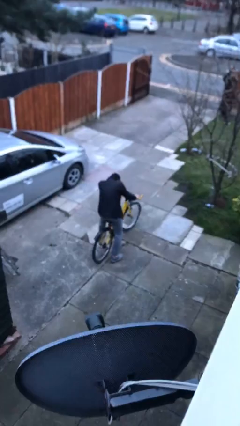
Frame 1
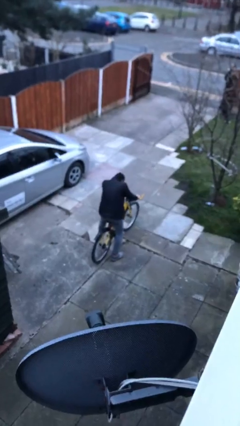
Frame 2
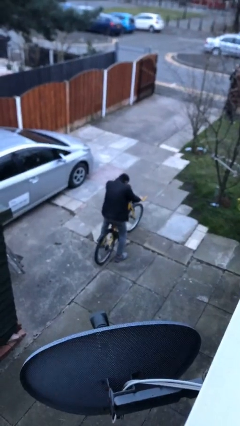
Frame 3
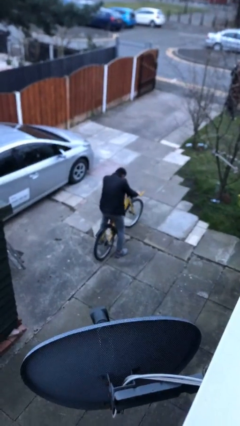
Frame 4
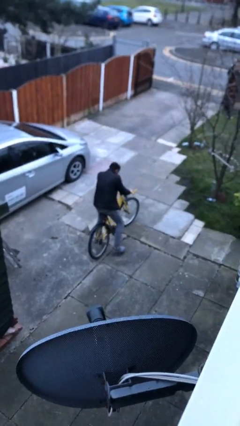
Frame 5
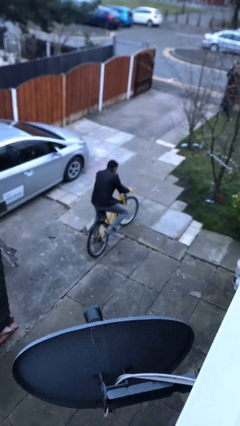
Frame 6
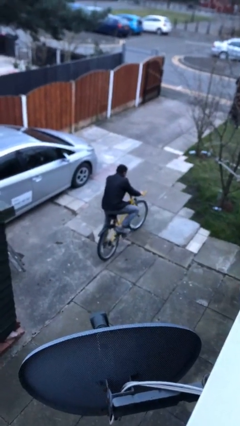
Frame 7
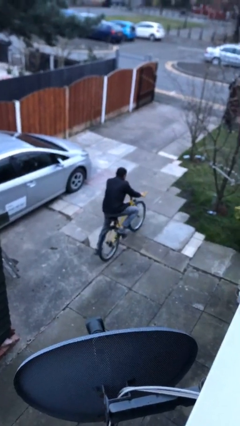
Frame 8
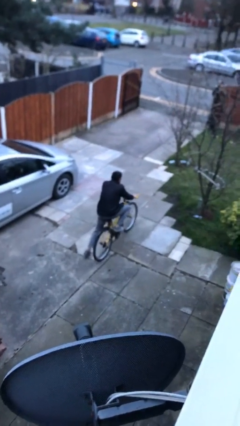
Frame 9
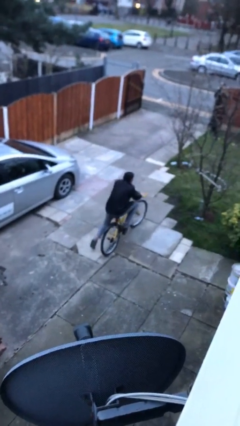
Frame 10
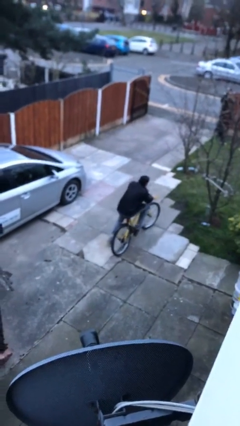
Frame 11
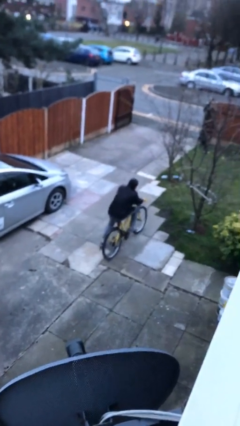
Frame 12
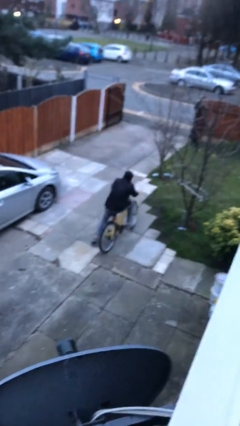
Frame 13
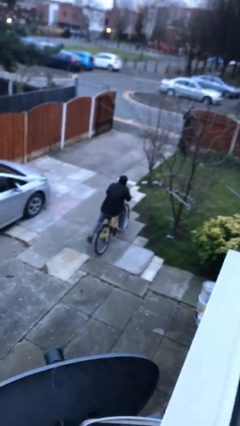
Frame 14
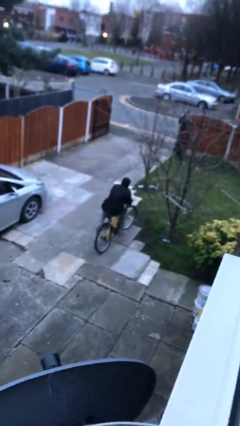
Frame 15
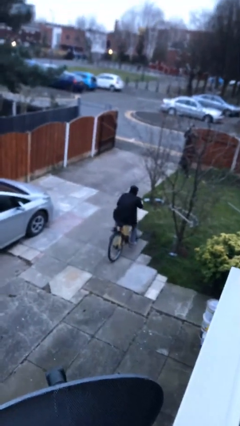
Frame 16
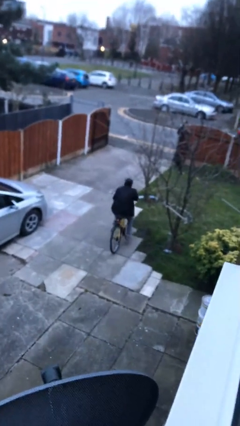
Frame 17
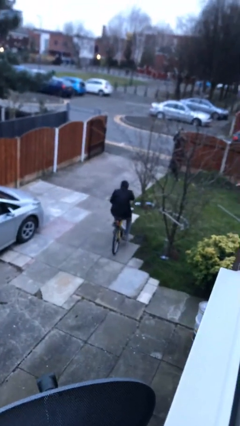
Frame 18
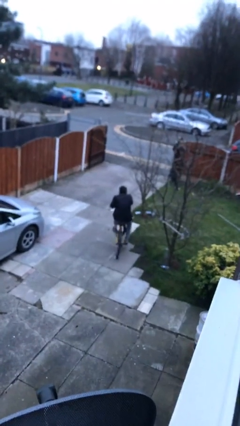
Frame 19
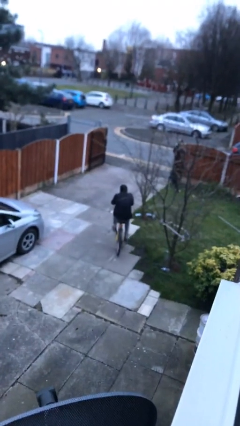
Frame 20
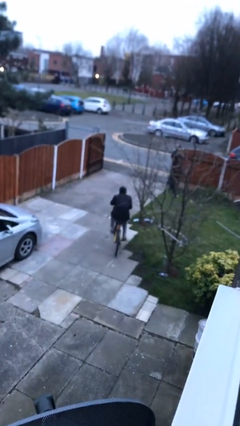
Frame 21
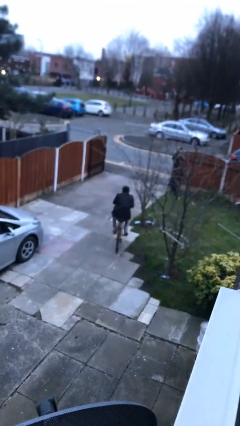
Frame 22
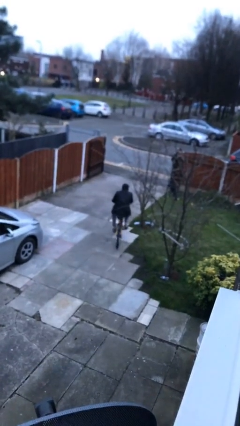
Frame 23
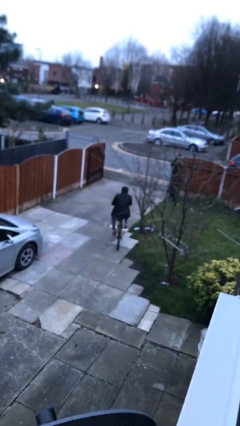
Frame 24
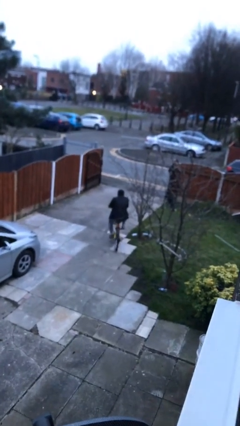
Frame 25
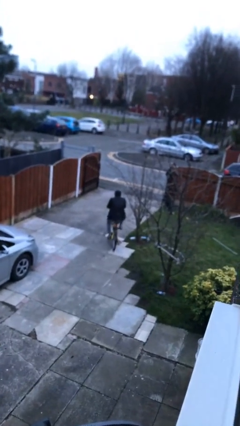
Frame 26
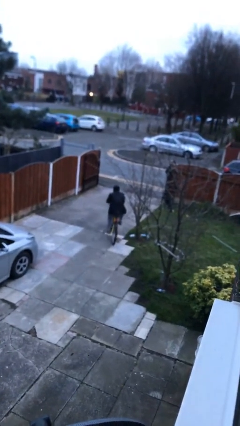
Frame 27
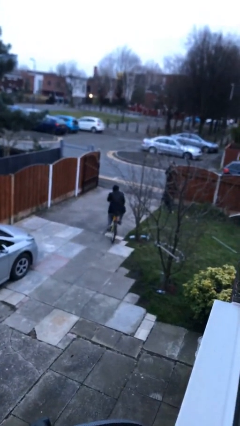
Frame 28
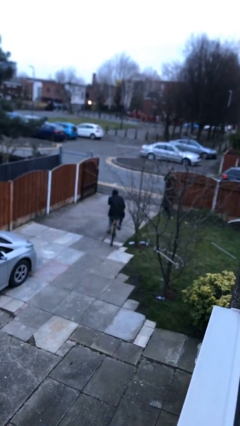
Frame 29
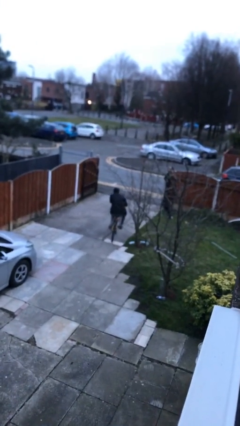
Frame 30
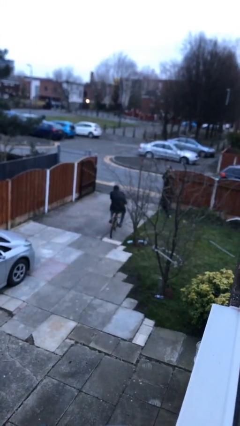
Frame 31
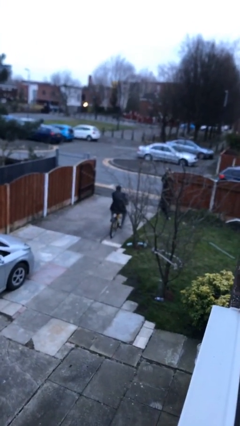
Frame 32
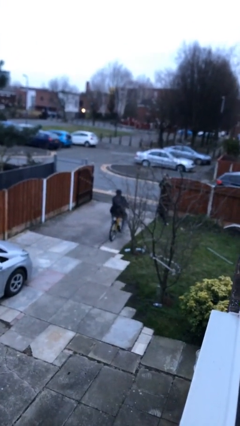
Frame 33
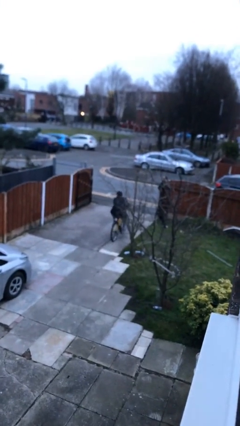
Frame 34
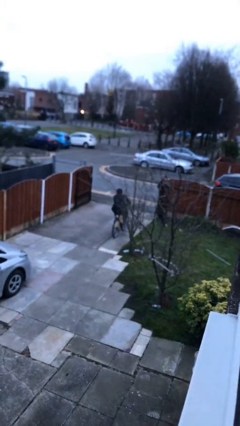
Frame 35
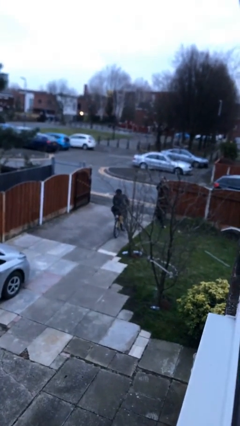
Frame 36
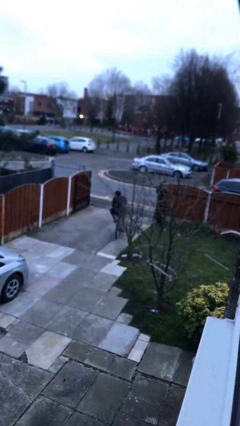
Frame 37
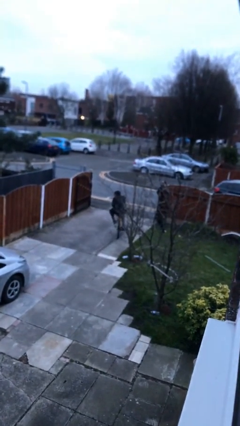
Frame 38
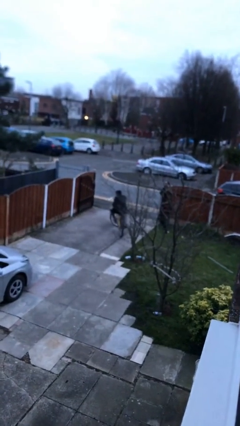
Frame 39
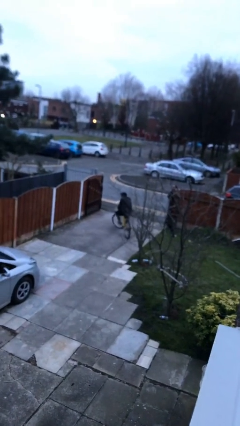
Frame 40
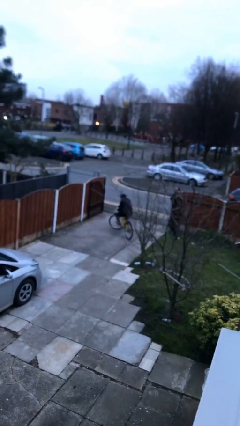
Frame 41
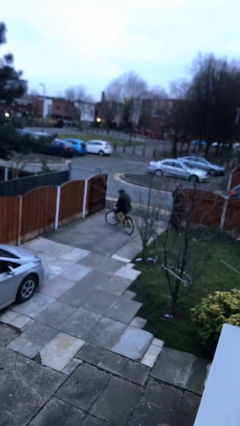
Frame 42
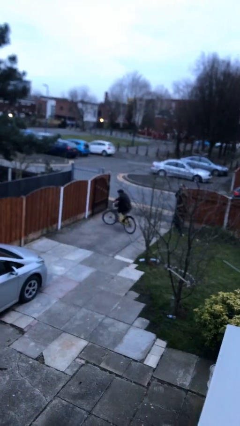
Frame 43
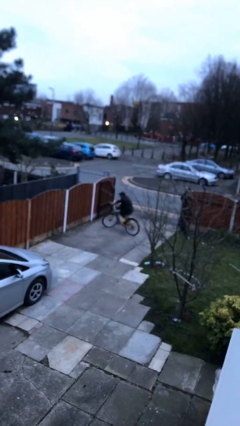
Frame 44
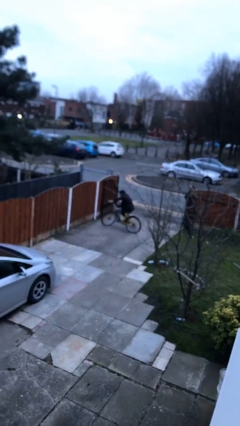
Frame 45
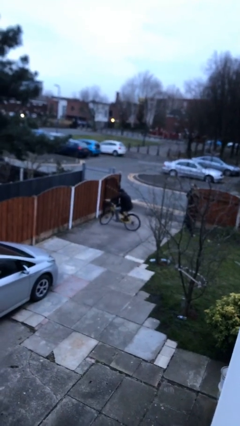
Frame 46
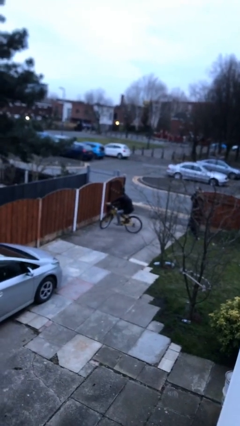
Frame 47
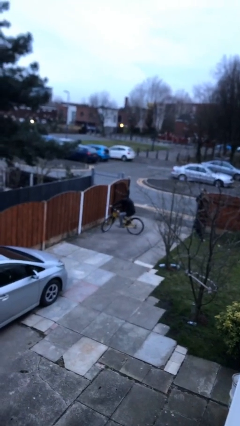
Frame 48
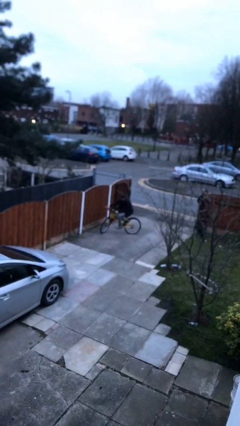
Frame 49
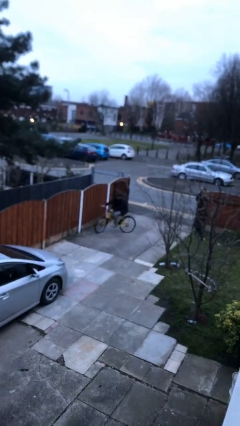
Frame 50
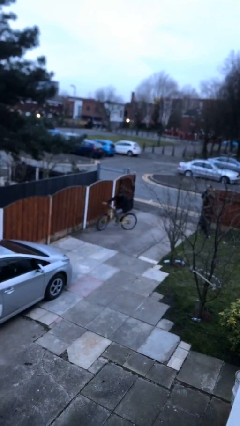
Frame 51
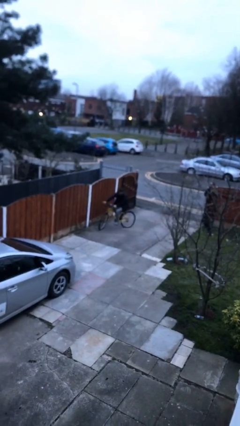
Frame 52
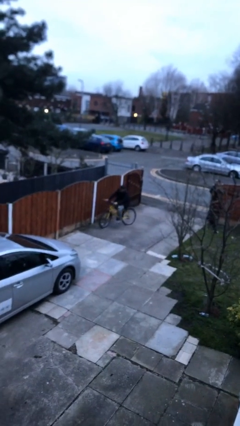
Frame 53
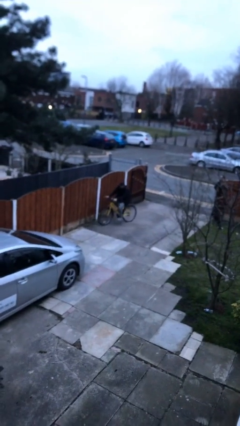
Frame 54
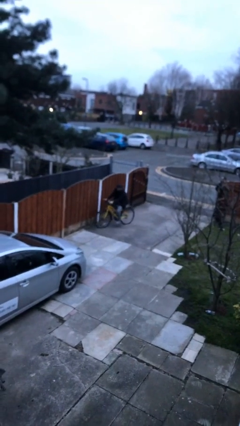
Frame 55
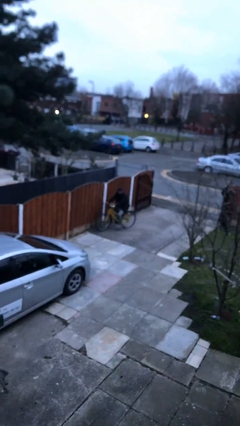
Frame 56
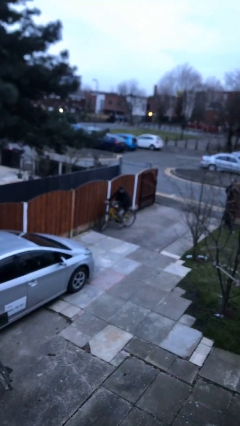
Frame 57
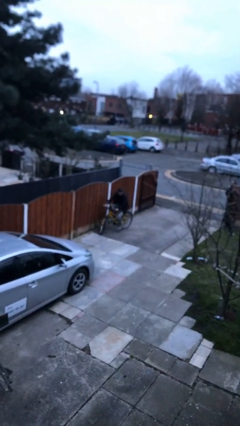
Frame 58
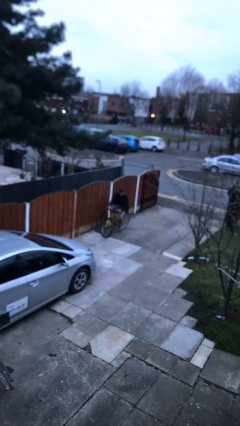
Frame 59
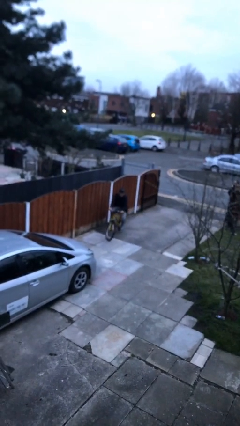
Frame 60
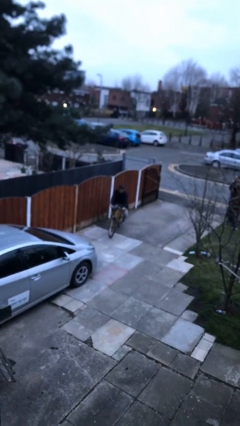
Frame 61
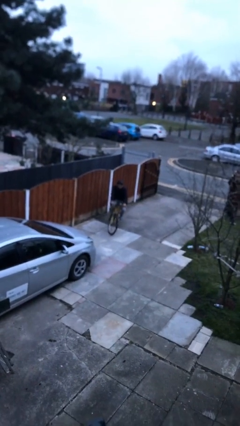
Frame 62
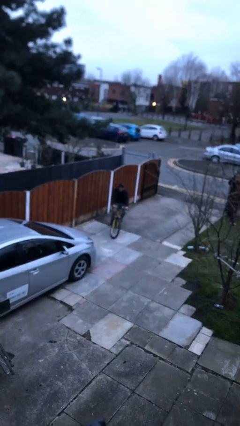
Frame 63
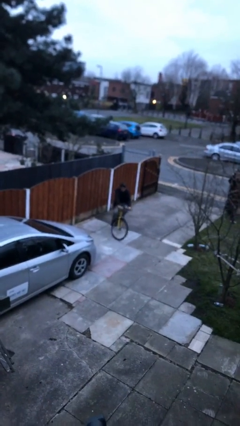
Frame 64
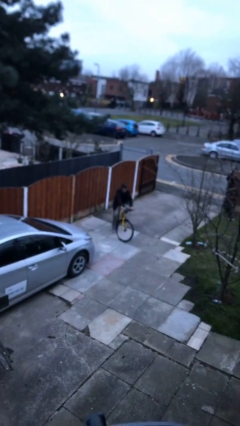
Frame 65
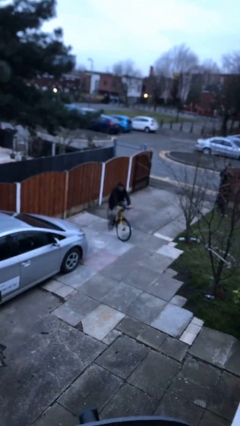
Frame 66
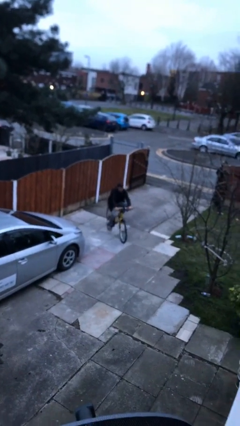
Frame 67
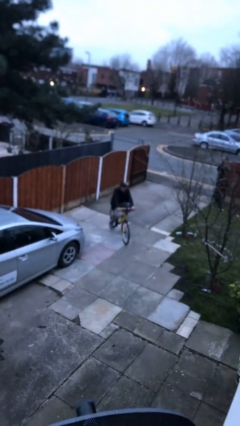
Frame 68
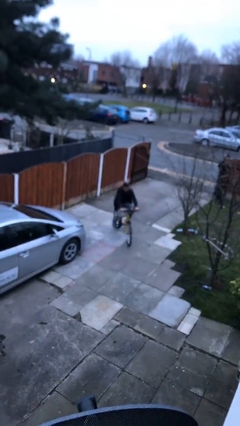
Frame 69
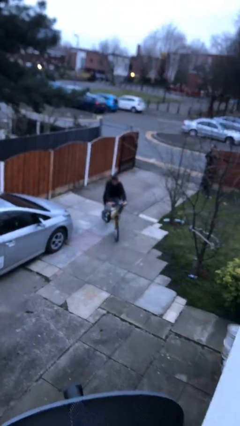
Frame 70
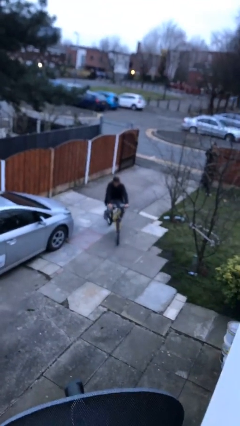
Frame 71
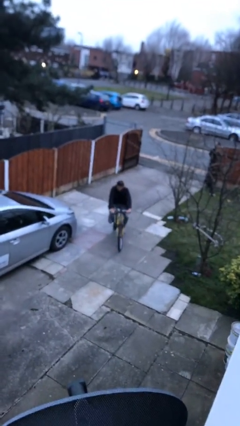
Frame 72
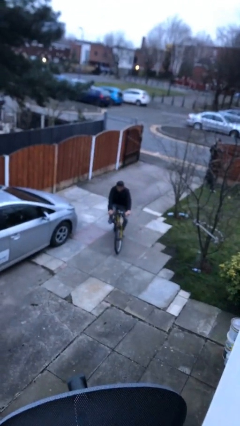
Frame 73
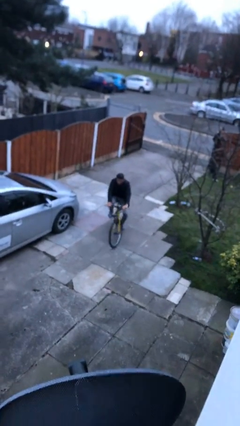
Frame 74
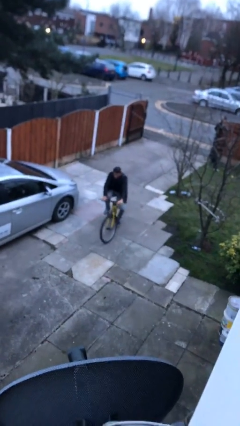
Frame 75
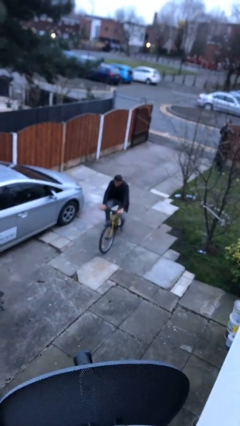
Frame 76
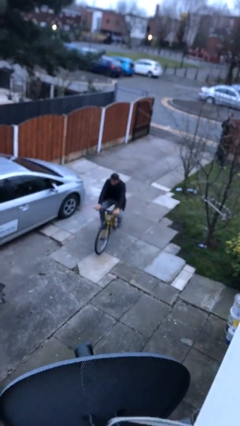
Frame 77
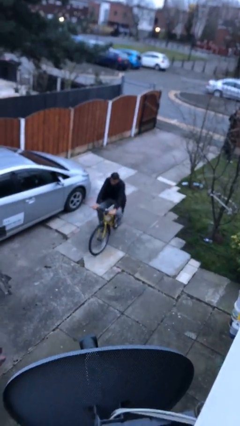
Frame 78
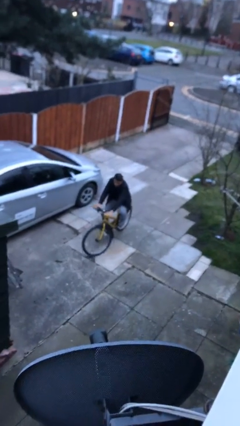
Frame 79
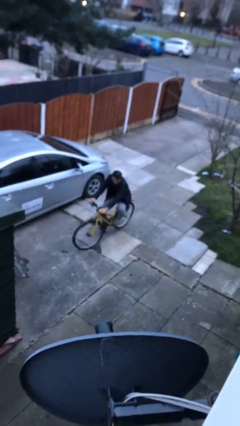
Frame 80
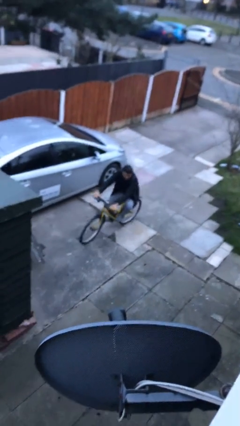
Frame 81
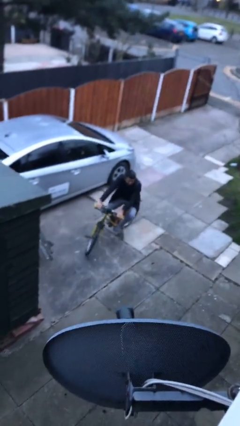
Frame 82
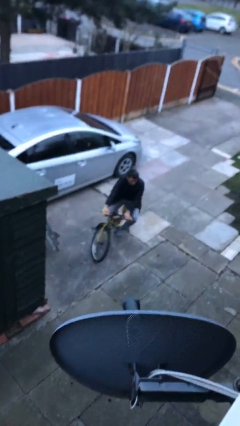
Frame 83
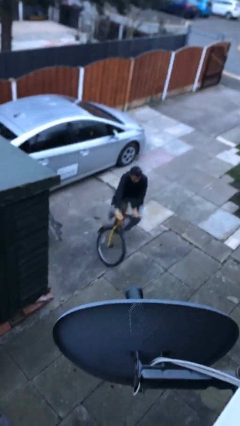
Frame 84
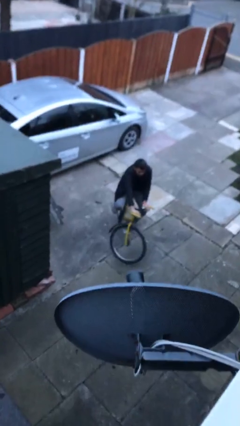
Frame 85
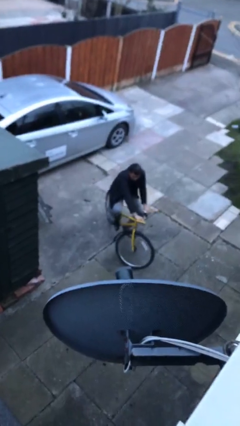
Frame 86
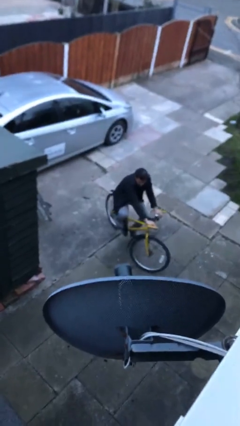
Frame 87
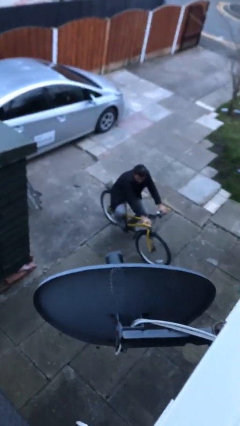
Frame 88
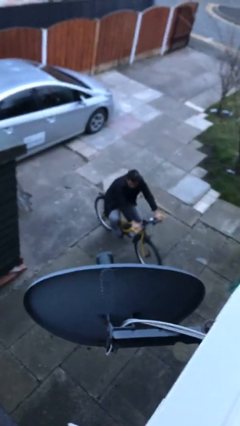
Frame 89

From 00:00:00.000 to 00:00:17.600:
person rides bicycle
